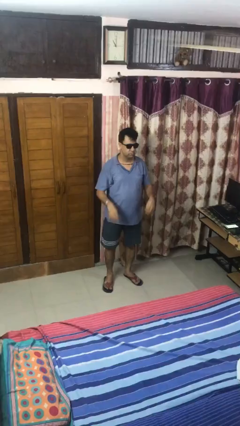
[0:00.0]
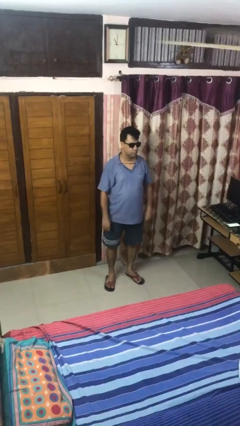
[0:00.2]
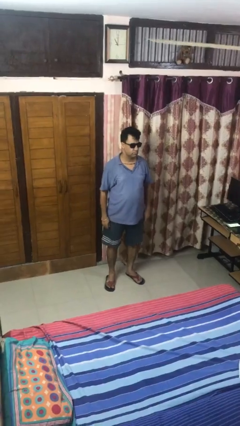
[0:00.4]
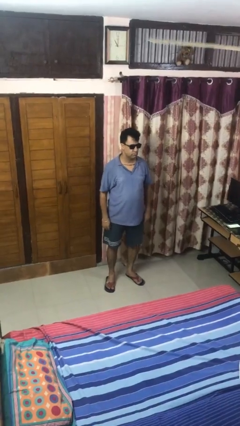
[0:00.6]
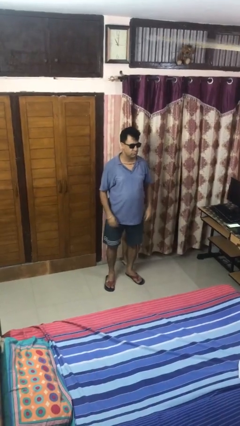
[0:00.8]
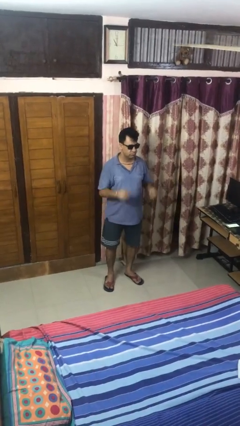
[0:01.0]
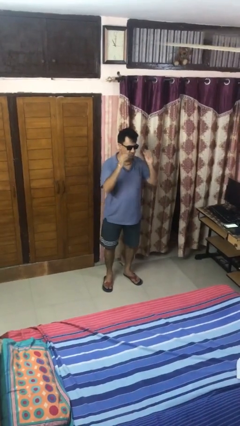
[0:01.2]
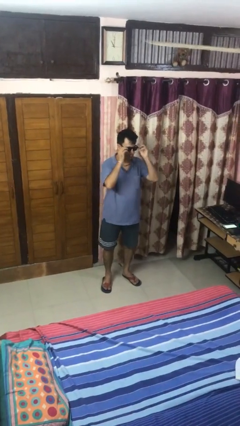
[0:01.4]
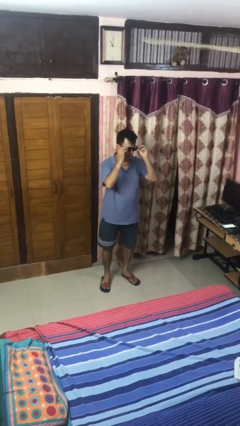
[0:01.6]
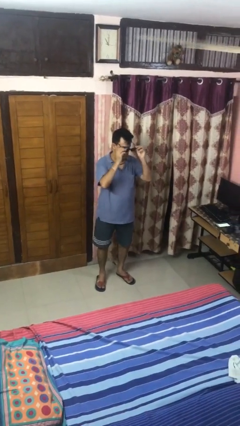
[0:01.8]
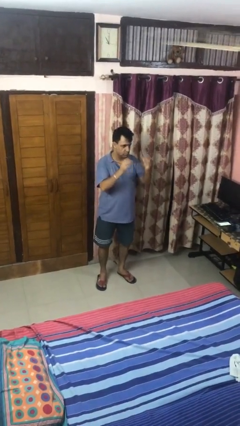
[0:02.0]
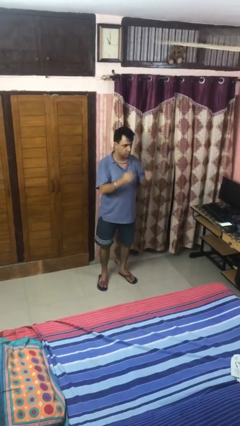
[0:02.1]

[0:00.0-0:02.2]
person takes off sunglasses

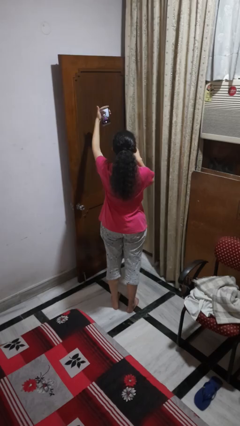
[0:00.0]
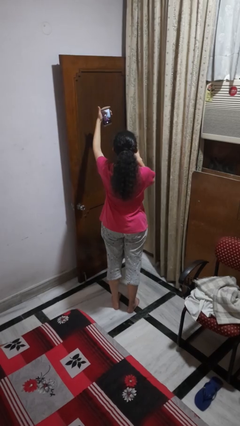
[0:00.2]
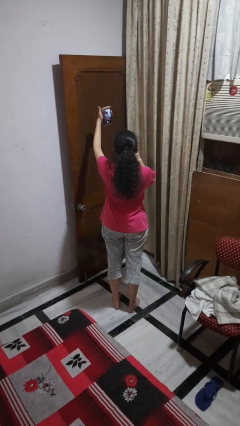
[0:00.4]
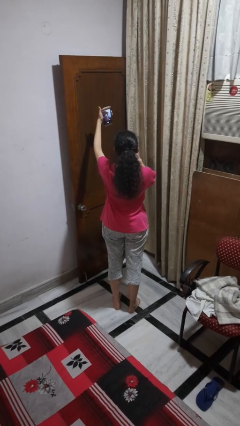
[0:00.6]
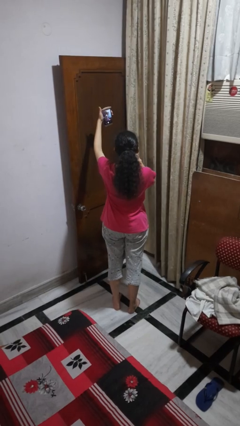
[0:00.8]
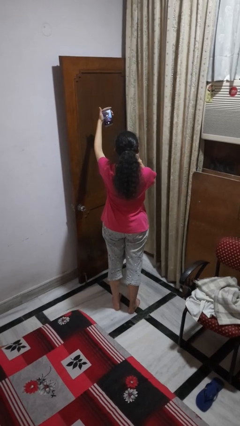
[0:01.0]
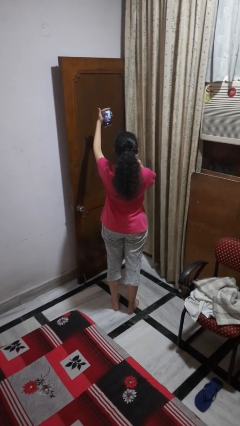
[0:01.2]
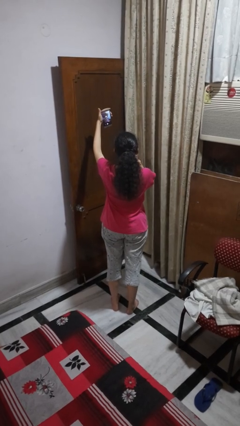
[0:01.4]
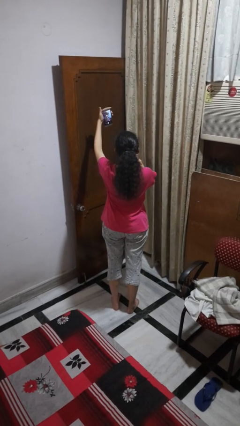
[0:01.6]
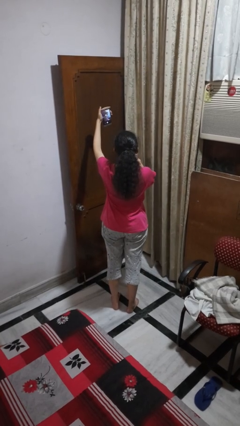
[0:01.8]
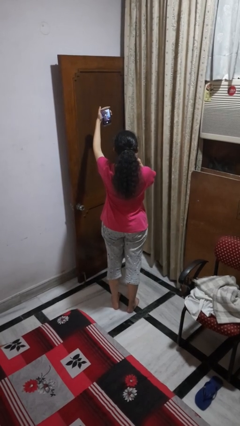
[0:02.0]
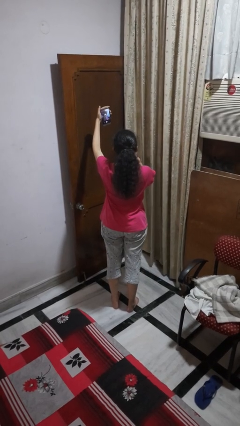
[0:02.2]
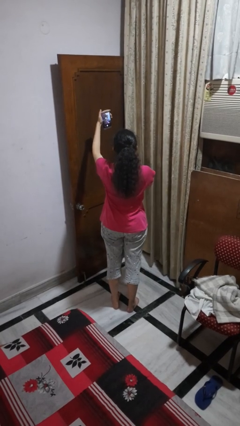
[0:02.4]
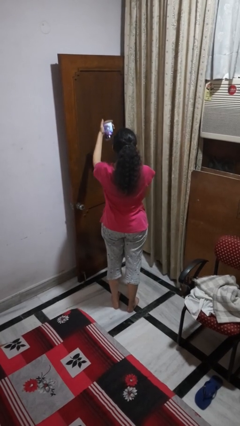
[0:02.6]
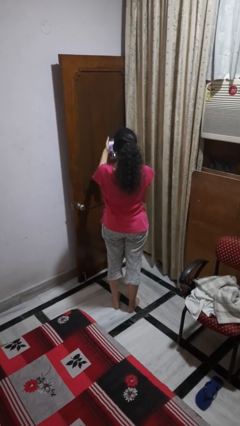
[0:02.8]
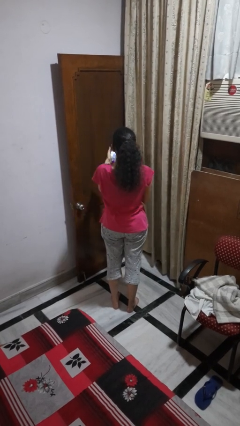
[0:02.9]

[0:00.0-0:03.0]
person takes selfie

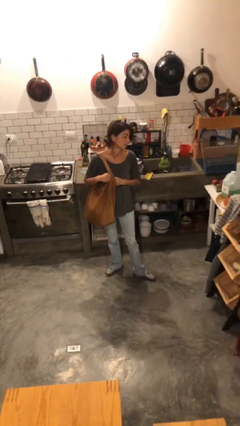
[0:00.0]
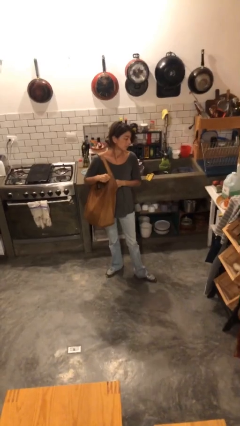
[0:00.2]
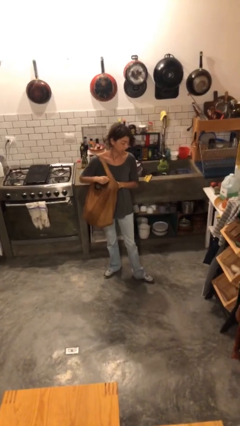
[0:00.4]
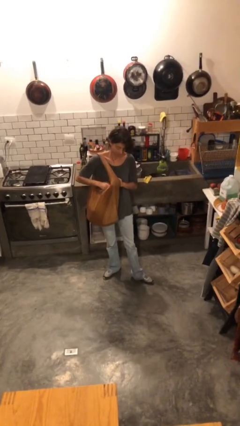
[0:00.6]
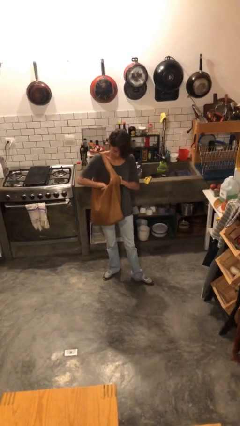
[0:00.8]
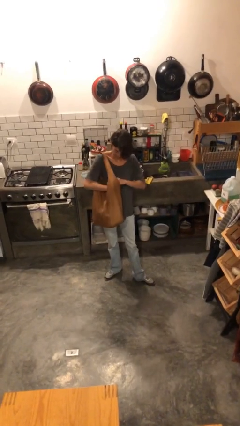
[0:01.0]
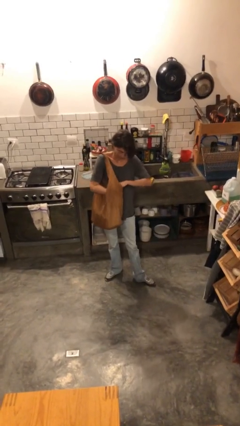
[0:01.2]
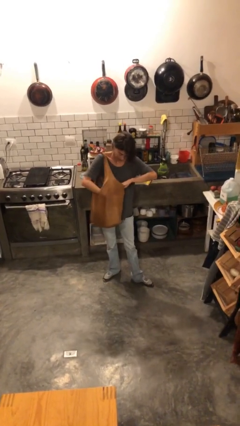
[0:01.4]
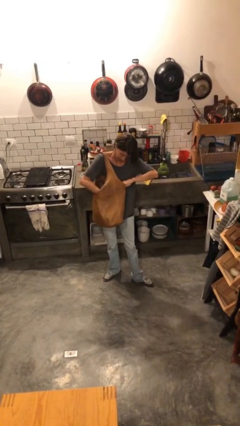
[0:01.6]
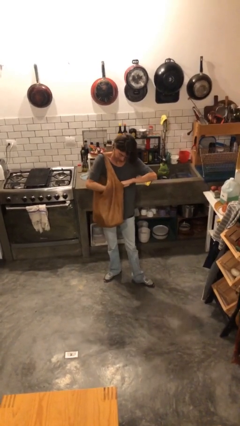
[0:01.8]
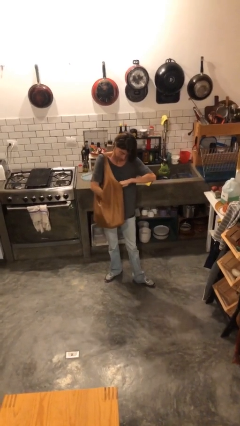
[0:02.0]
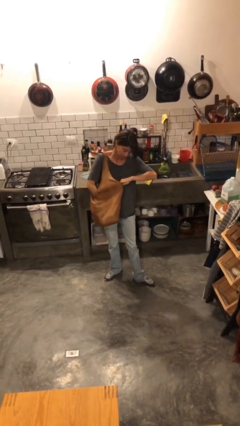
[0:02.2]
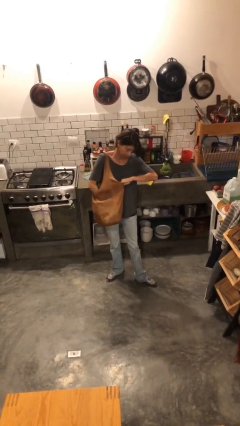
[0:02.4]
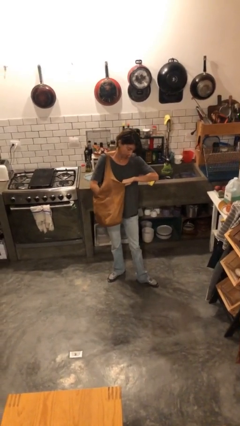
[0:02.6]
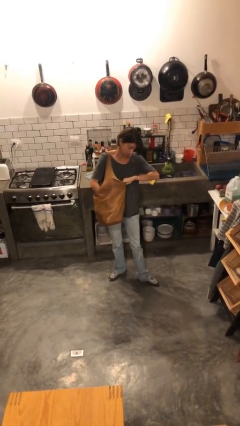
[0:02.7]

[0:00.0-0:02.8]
person searches in purse

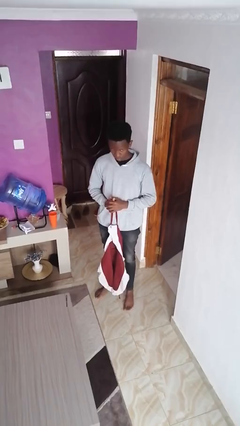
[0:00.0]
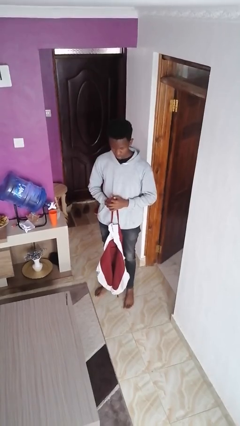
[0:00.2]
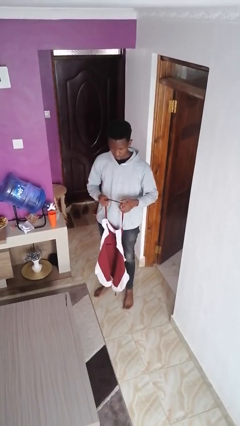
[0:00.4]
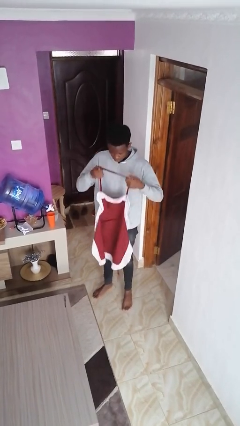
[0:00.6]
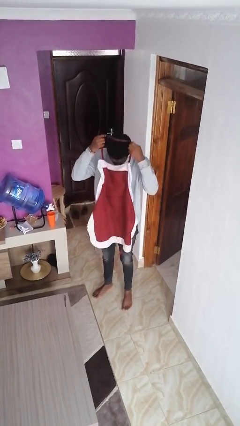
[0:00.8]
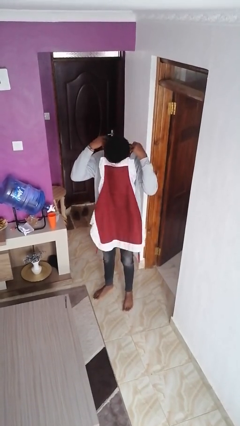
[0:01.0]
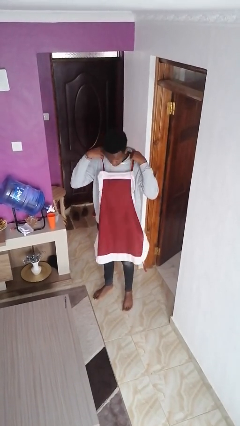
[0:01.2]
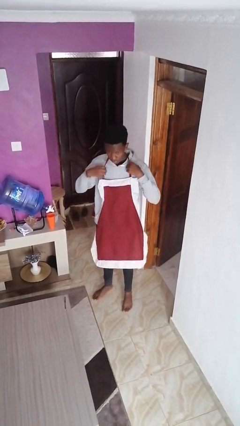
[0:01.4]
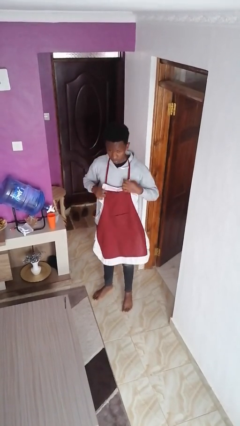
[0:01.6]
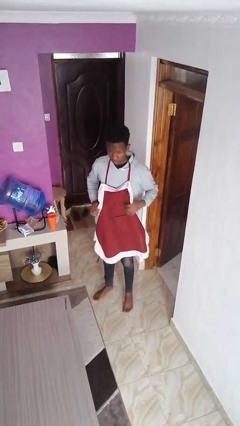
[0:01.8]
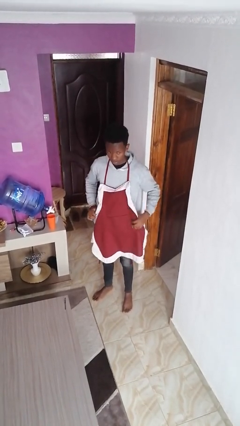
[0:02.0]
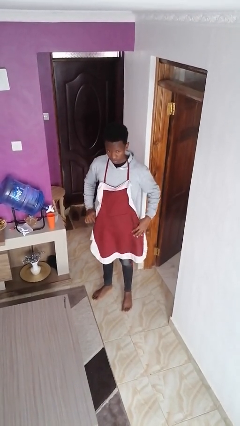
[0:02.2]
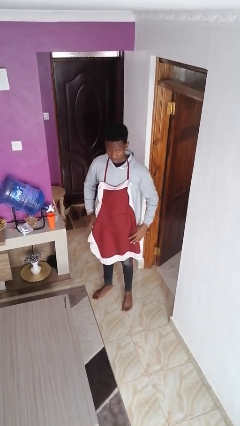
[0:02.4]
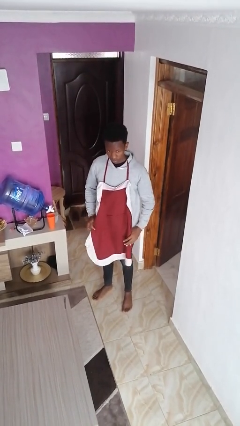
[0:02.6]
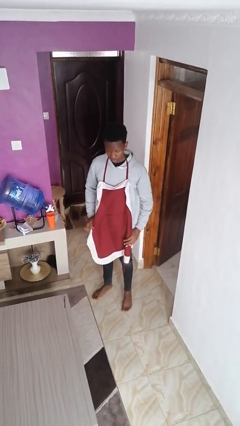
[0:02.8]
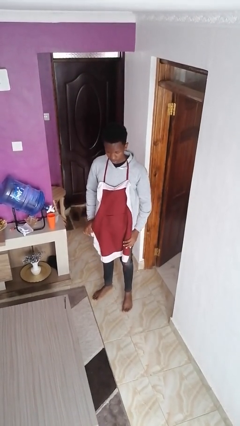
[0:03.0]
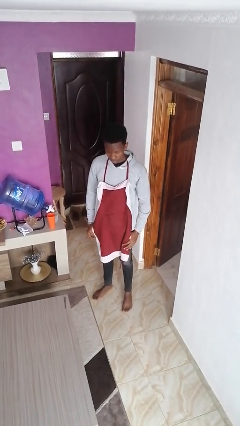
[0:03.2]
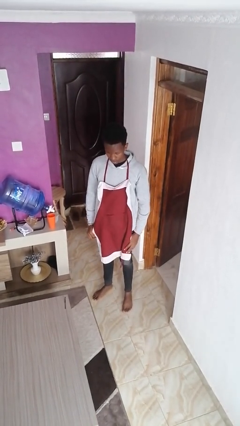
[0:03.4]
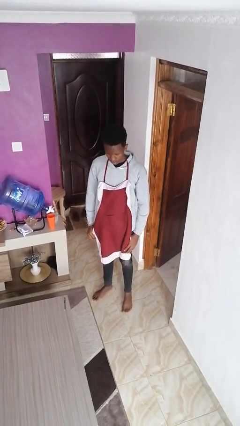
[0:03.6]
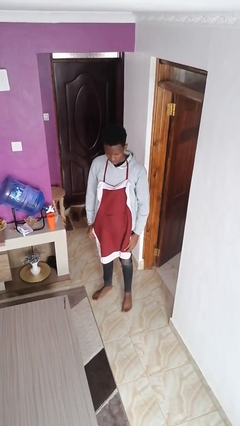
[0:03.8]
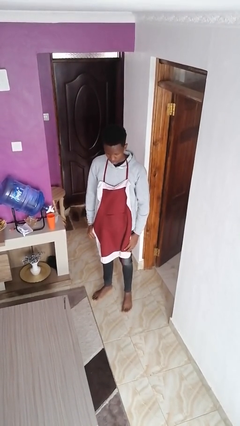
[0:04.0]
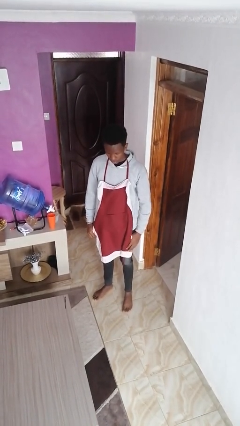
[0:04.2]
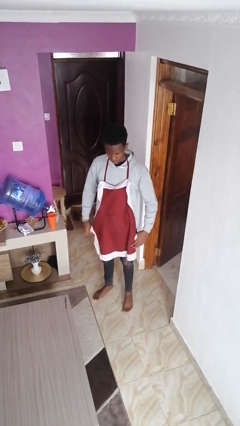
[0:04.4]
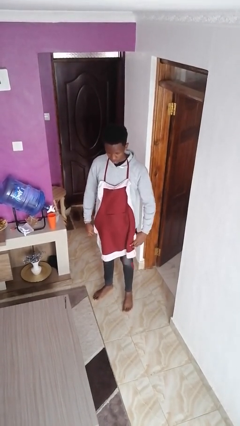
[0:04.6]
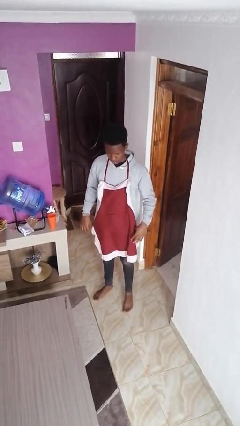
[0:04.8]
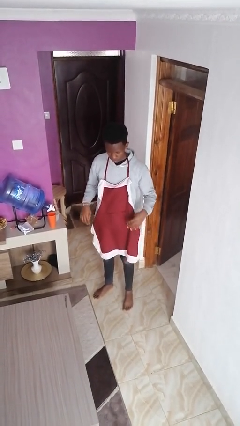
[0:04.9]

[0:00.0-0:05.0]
person puts on apron

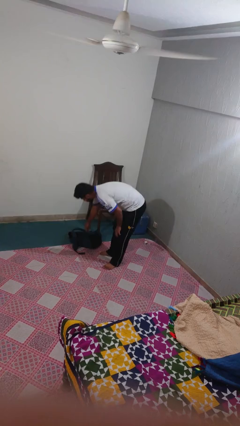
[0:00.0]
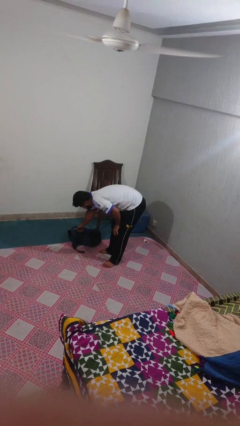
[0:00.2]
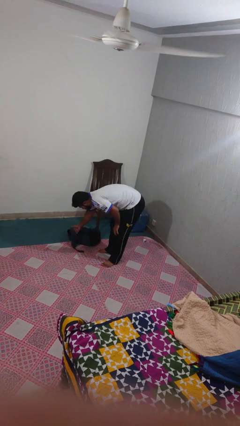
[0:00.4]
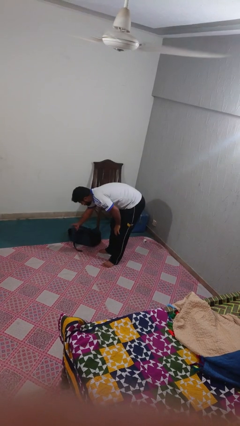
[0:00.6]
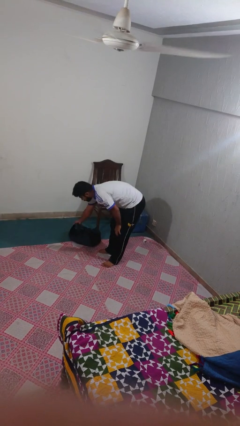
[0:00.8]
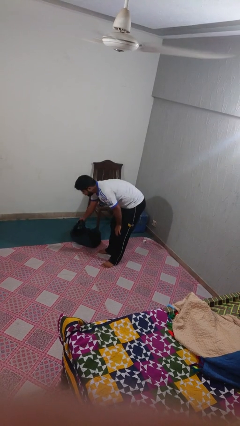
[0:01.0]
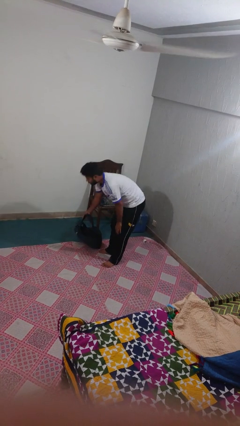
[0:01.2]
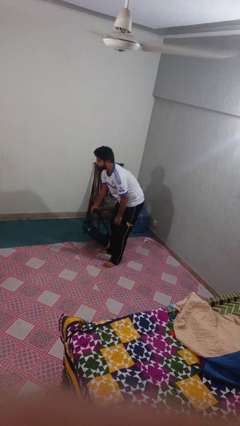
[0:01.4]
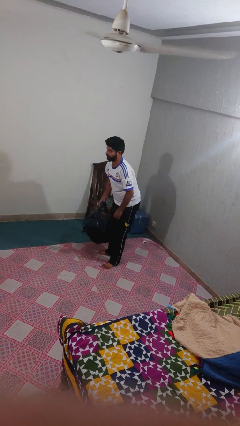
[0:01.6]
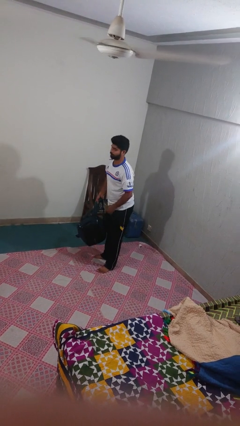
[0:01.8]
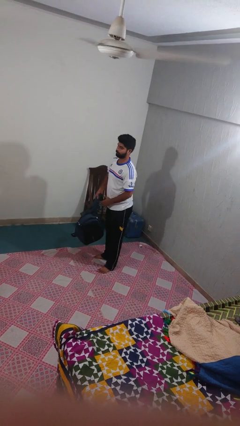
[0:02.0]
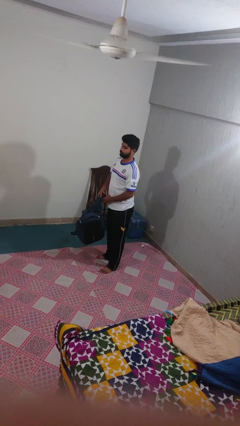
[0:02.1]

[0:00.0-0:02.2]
person picks up object from floor

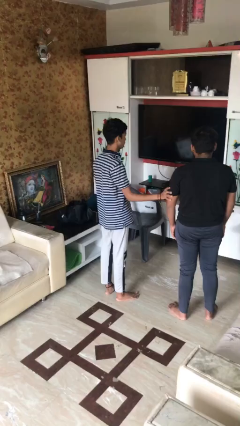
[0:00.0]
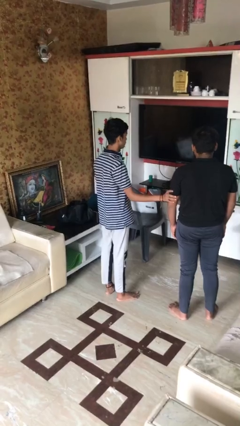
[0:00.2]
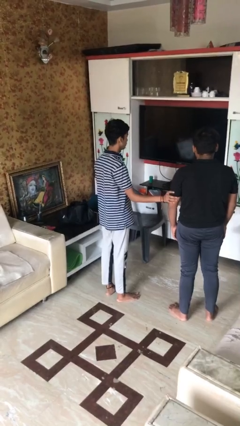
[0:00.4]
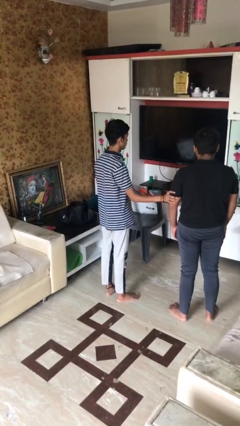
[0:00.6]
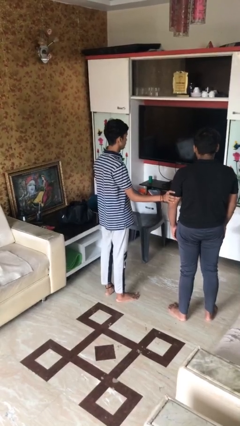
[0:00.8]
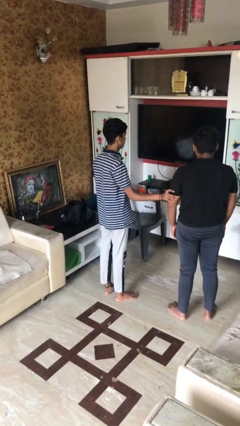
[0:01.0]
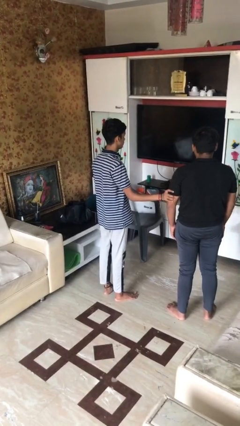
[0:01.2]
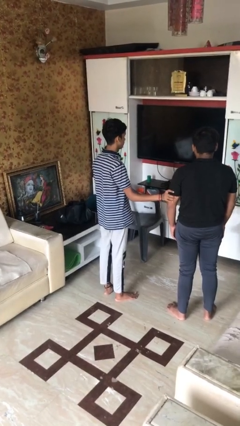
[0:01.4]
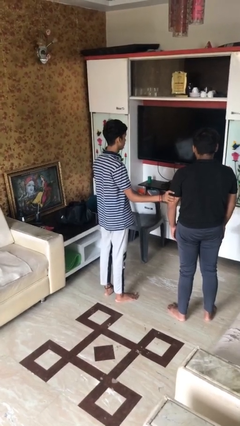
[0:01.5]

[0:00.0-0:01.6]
person grabs person by bicep

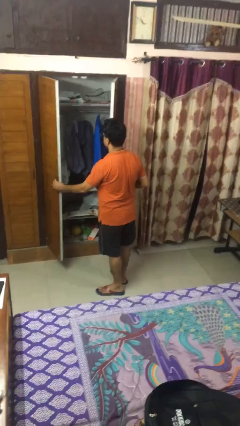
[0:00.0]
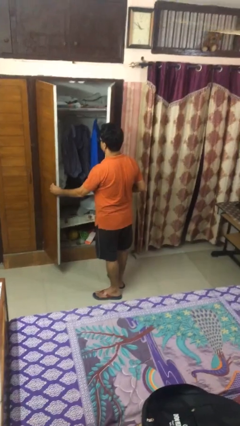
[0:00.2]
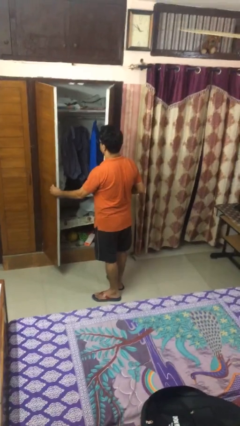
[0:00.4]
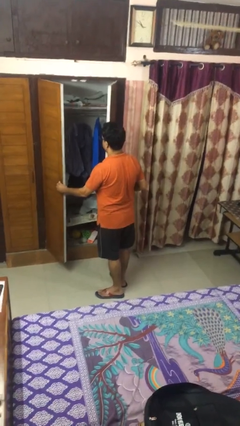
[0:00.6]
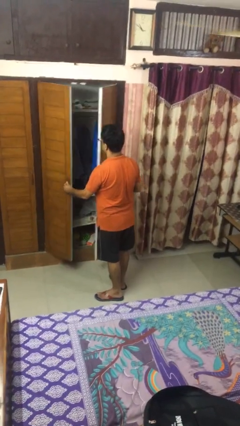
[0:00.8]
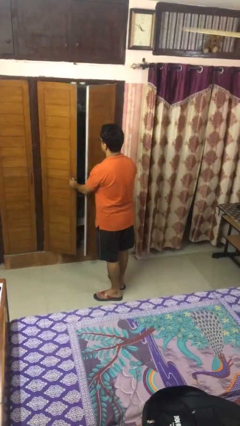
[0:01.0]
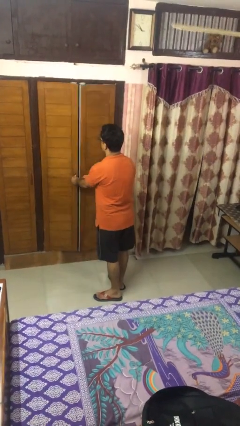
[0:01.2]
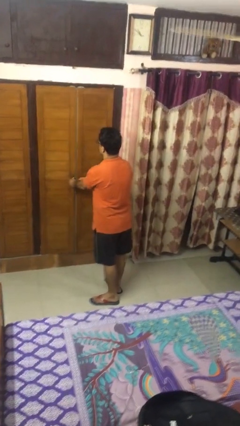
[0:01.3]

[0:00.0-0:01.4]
person closes closet door
